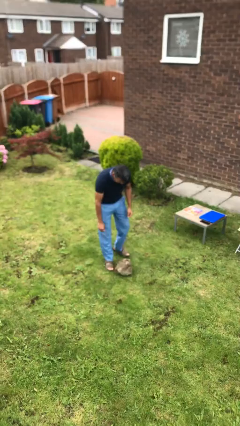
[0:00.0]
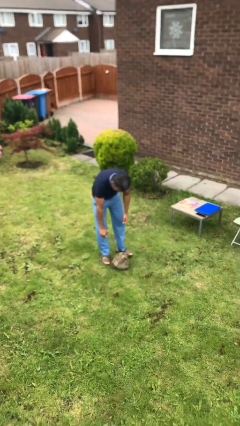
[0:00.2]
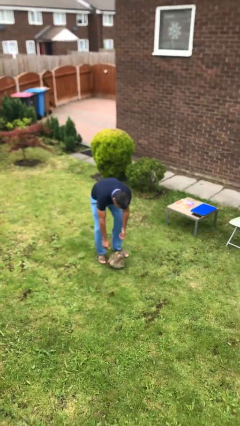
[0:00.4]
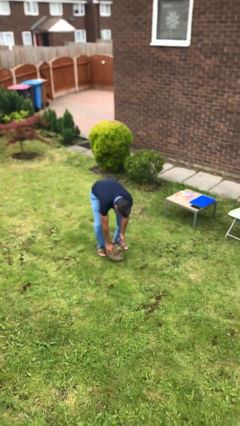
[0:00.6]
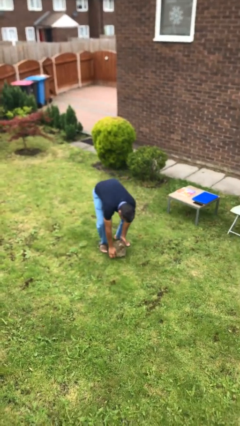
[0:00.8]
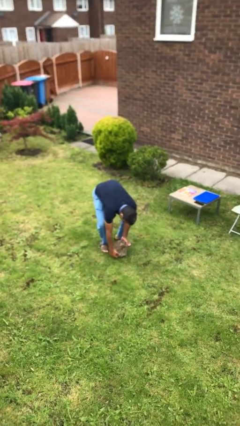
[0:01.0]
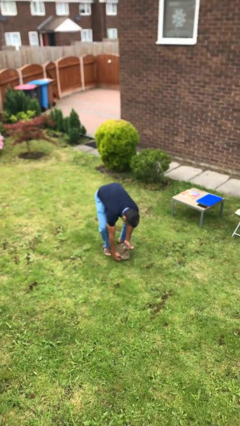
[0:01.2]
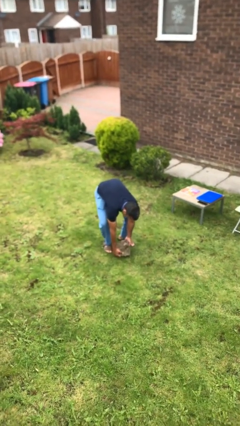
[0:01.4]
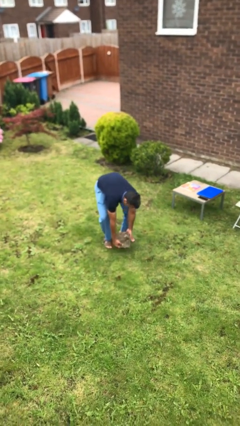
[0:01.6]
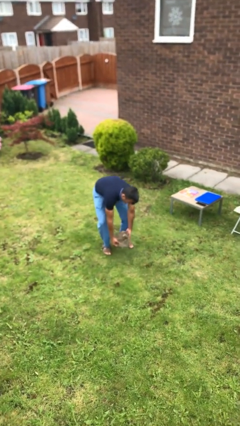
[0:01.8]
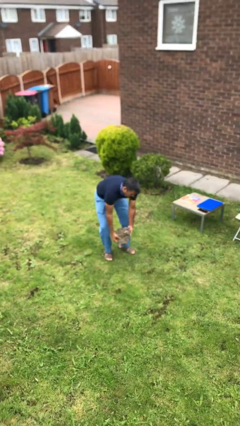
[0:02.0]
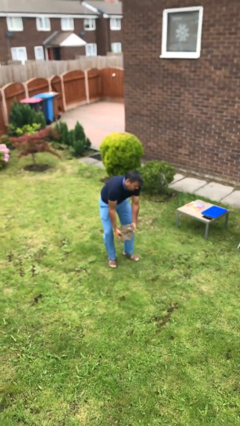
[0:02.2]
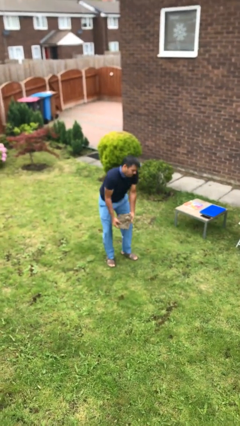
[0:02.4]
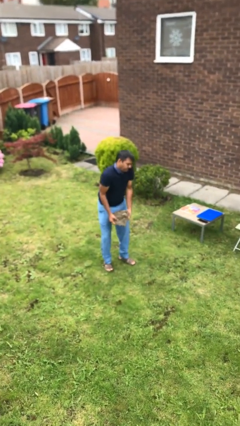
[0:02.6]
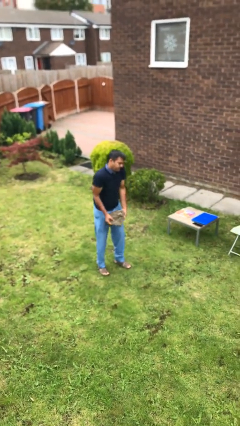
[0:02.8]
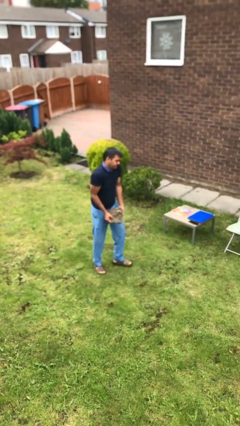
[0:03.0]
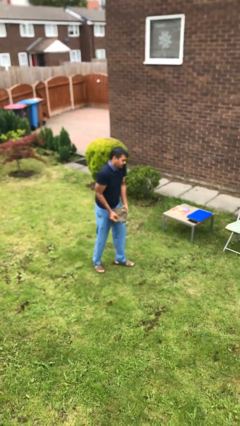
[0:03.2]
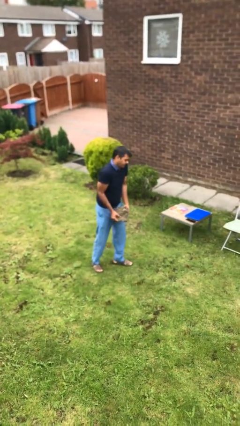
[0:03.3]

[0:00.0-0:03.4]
person picks up object from floor

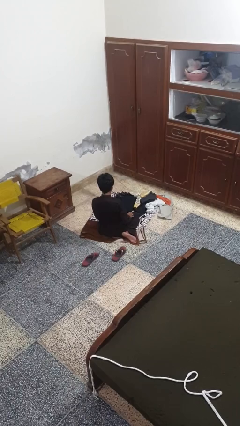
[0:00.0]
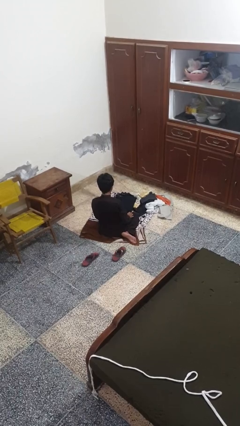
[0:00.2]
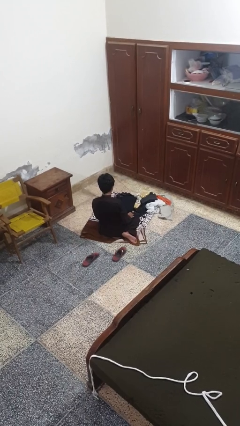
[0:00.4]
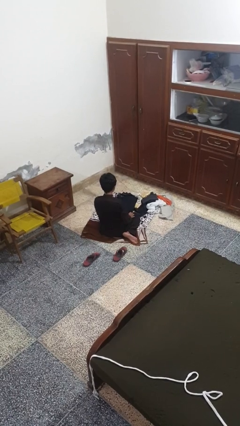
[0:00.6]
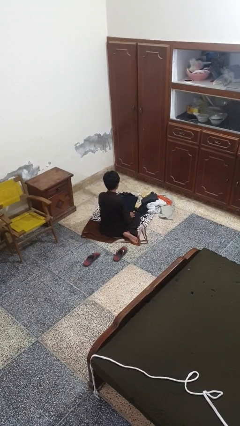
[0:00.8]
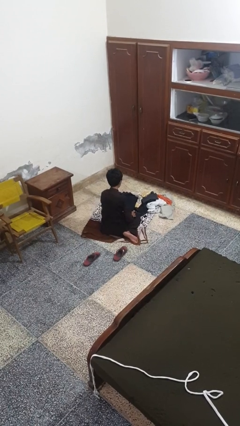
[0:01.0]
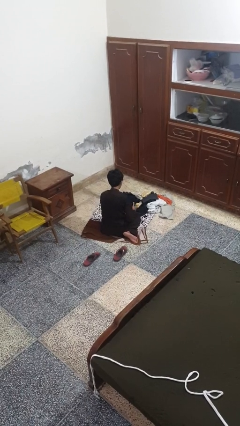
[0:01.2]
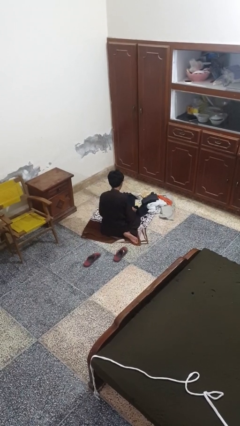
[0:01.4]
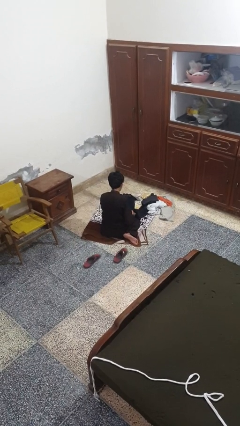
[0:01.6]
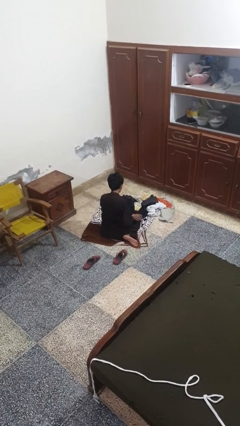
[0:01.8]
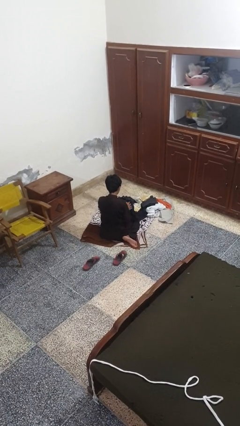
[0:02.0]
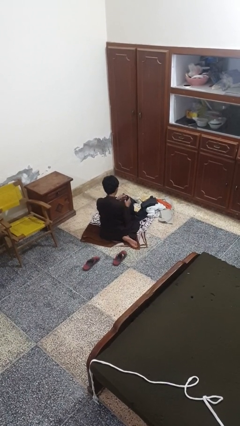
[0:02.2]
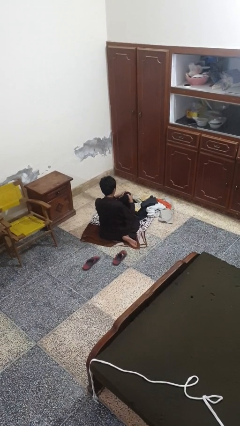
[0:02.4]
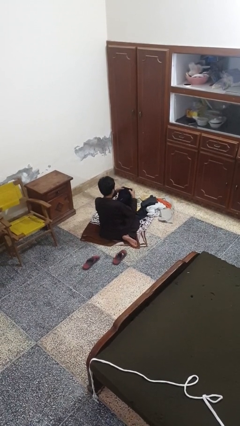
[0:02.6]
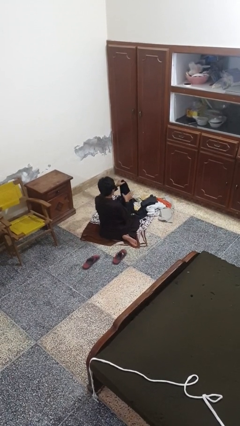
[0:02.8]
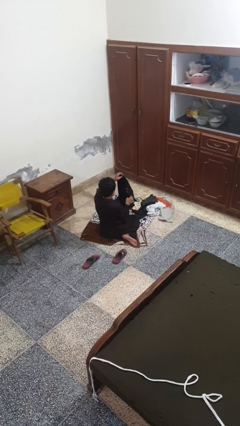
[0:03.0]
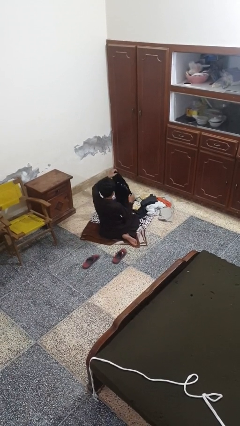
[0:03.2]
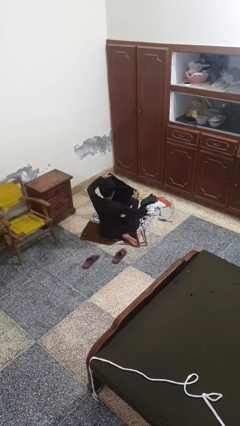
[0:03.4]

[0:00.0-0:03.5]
person folds pants

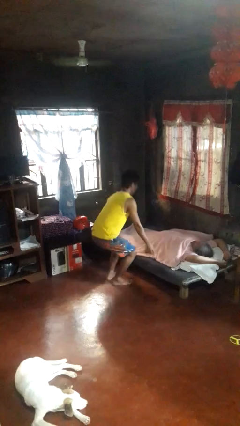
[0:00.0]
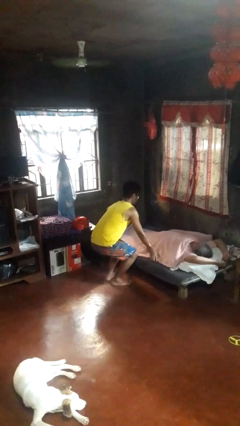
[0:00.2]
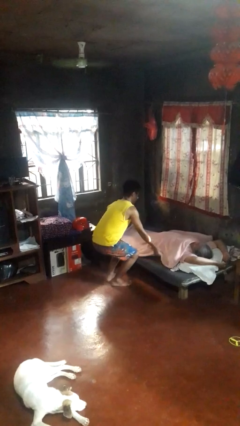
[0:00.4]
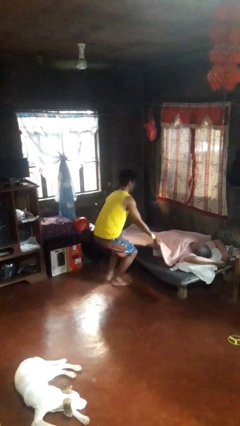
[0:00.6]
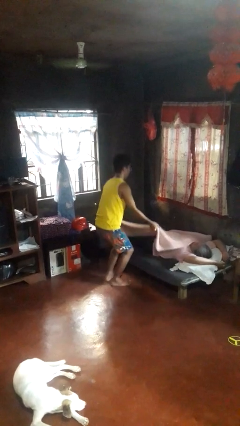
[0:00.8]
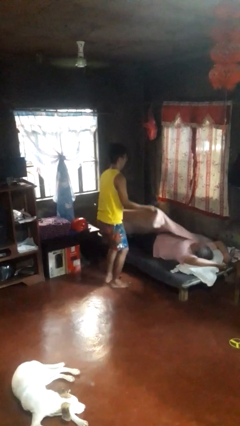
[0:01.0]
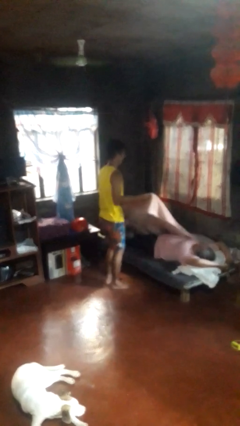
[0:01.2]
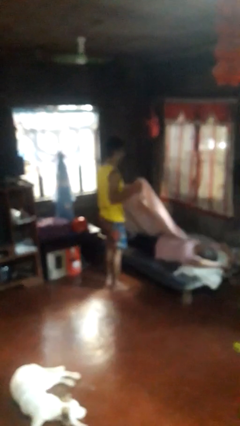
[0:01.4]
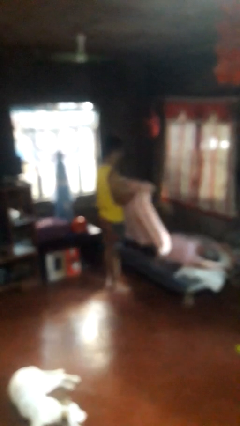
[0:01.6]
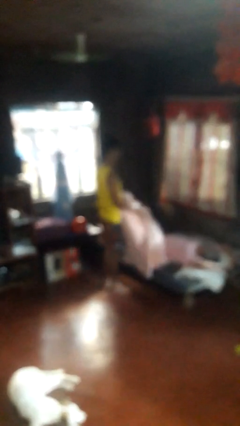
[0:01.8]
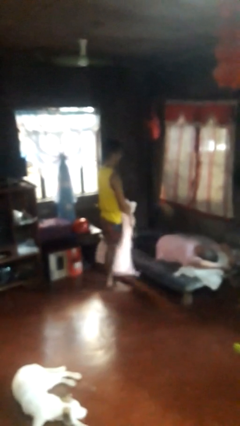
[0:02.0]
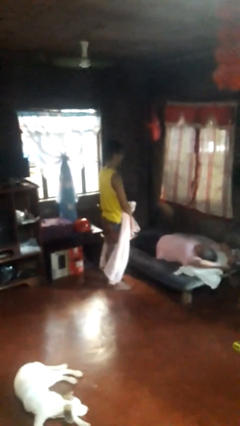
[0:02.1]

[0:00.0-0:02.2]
person uncovers friend with blanket

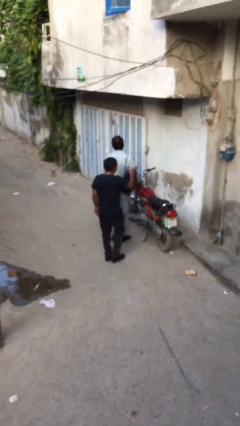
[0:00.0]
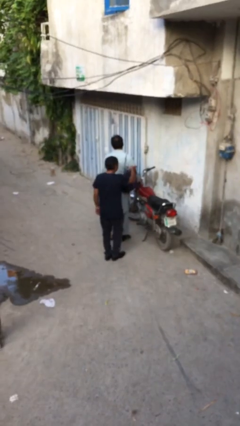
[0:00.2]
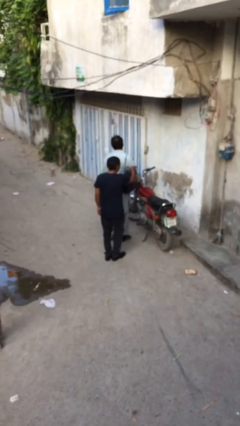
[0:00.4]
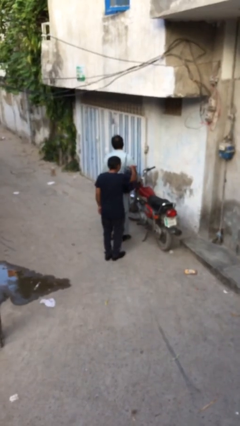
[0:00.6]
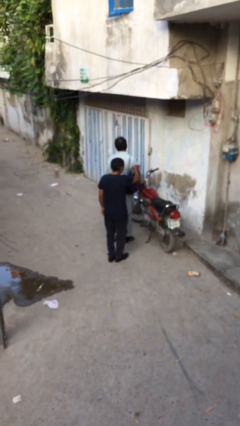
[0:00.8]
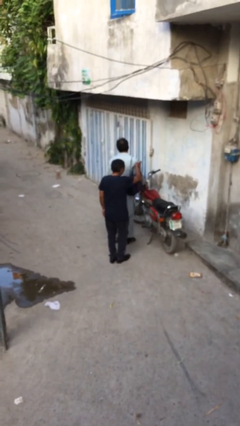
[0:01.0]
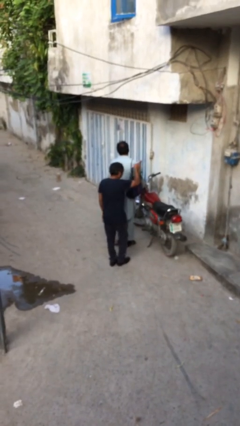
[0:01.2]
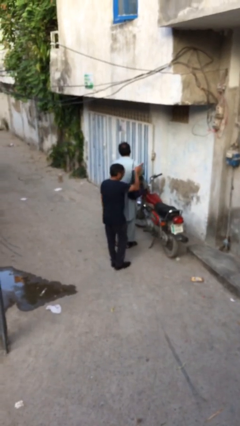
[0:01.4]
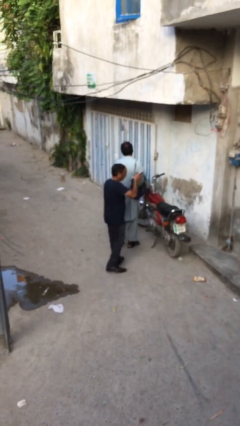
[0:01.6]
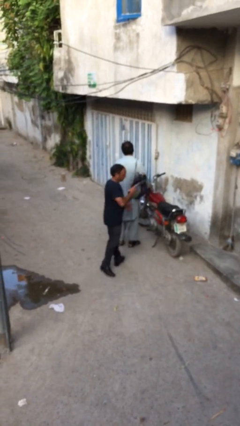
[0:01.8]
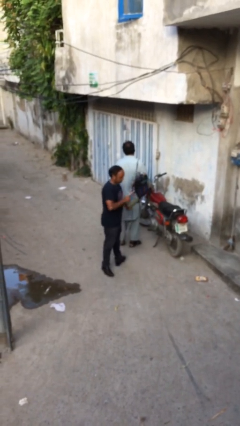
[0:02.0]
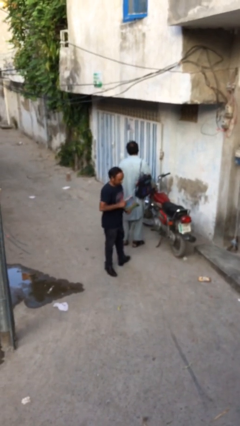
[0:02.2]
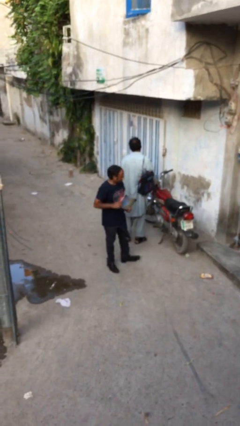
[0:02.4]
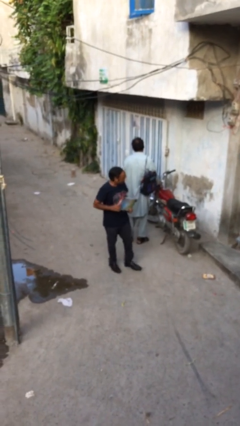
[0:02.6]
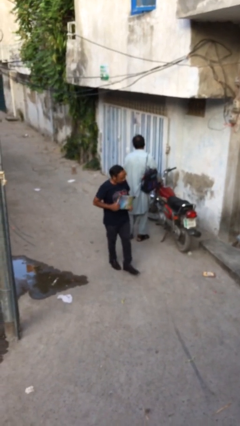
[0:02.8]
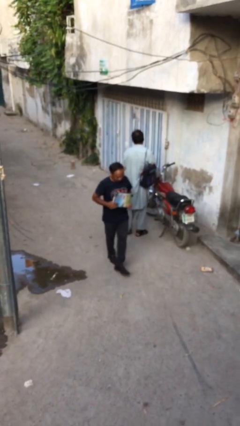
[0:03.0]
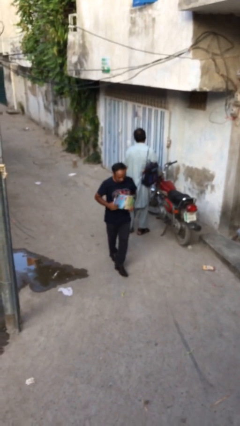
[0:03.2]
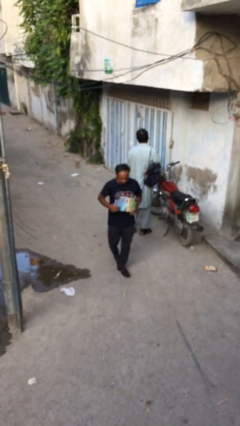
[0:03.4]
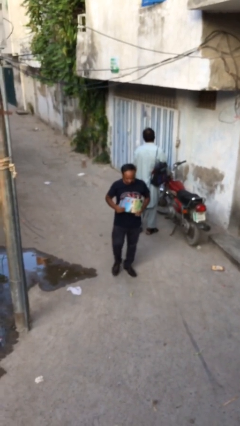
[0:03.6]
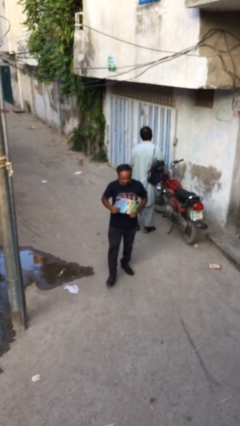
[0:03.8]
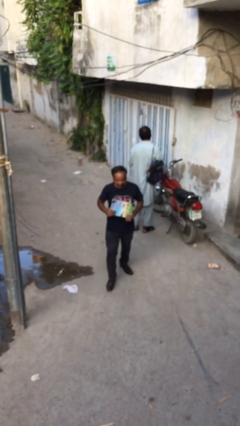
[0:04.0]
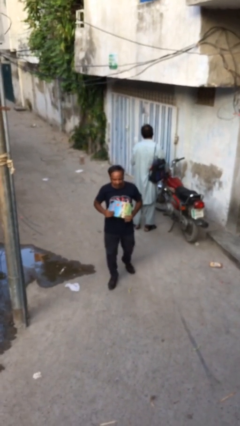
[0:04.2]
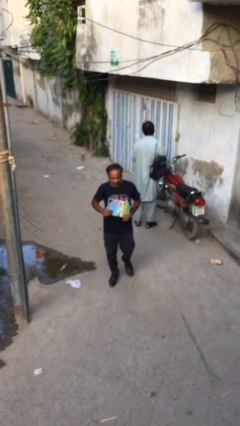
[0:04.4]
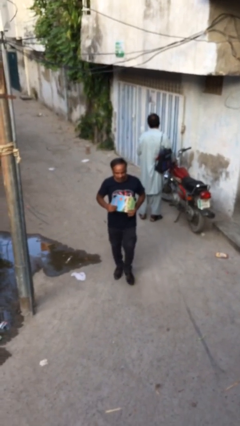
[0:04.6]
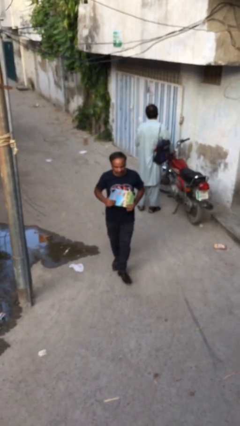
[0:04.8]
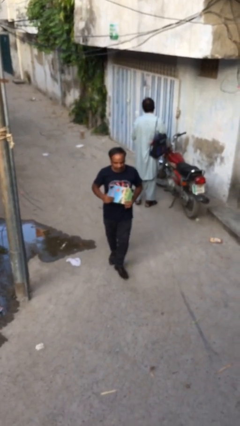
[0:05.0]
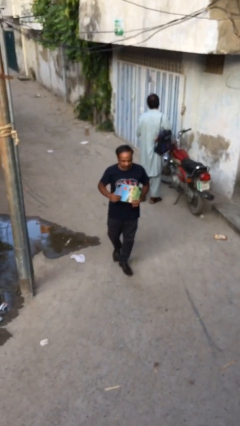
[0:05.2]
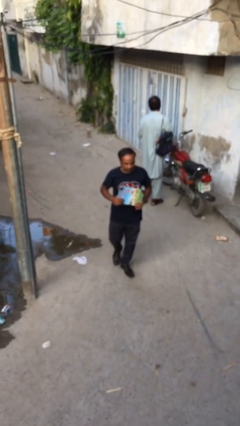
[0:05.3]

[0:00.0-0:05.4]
person steals object from person

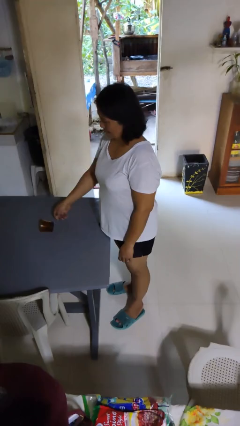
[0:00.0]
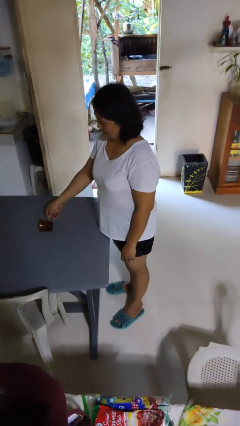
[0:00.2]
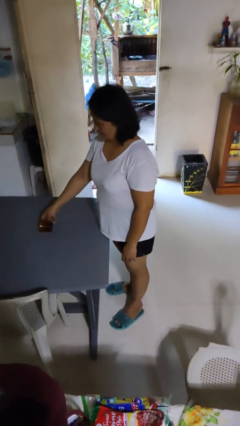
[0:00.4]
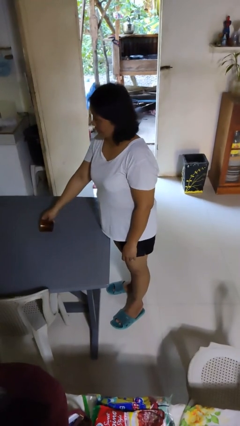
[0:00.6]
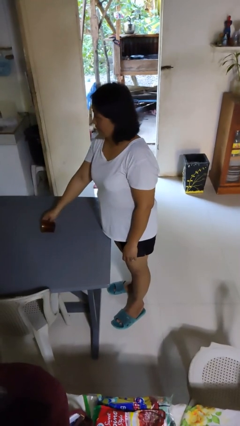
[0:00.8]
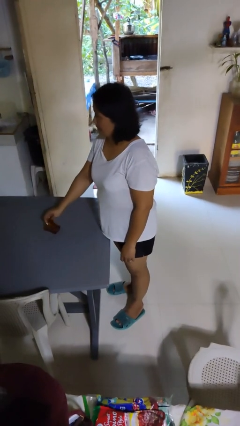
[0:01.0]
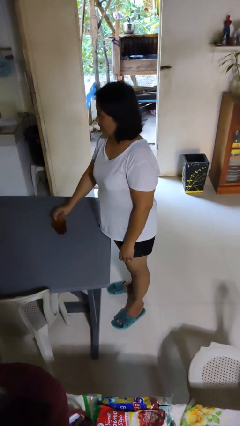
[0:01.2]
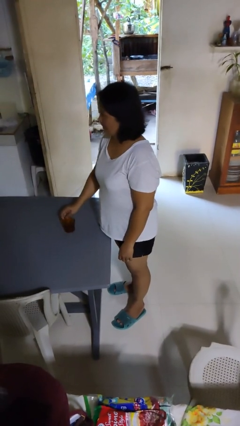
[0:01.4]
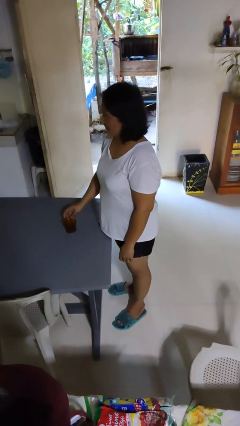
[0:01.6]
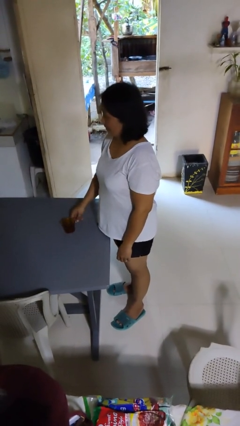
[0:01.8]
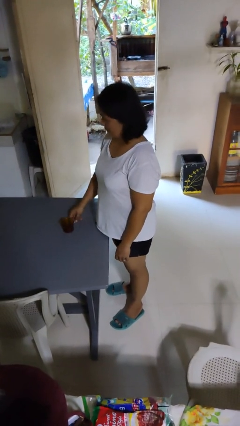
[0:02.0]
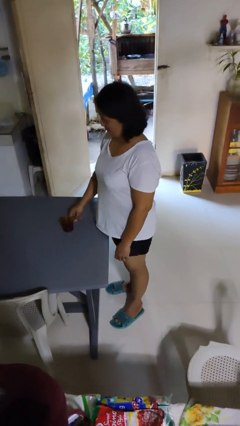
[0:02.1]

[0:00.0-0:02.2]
person sets upright glass

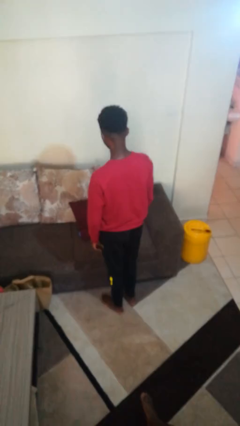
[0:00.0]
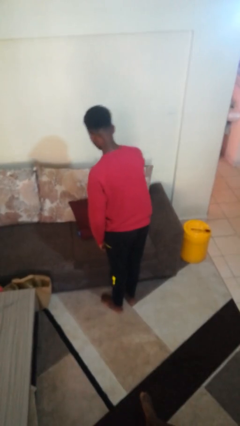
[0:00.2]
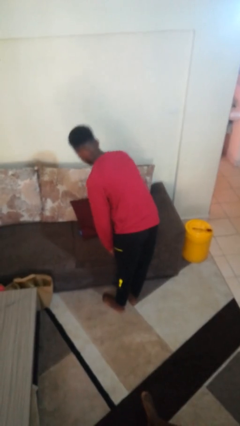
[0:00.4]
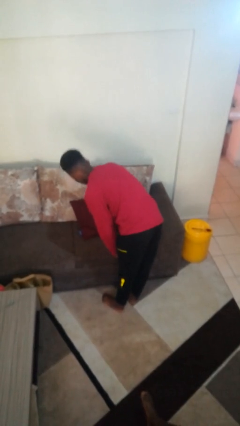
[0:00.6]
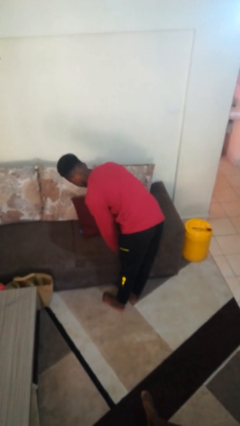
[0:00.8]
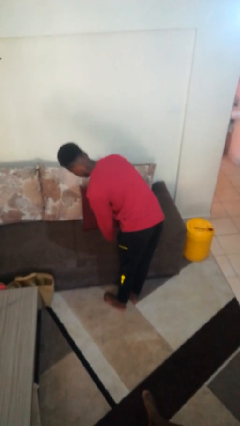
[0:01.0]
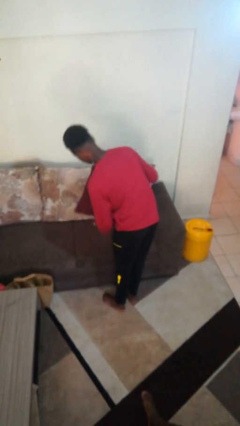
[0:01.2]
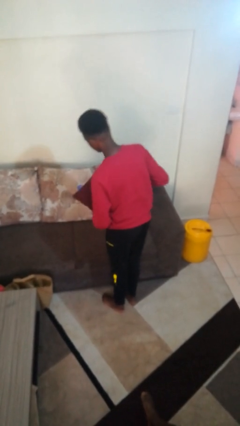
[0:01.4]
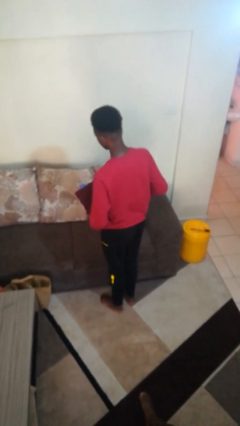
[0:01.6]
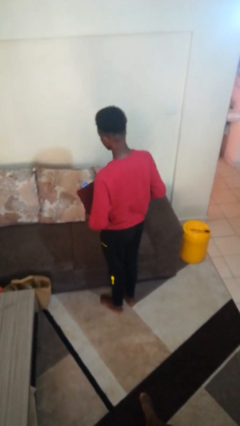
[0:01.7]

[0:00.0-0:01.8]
person picks up object from couch
